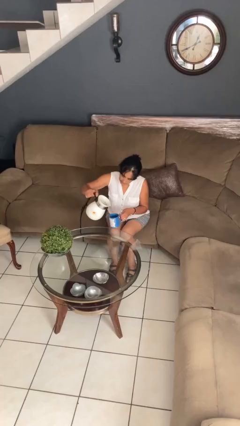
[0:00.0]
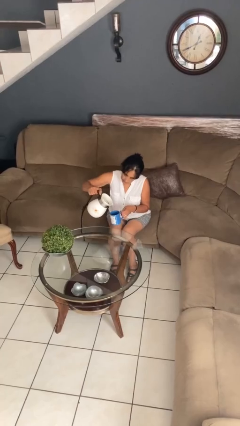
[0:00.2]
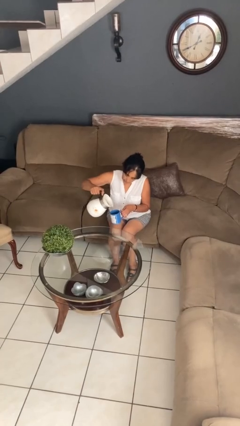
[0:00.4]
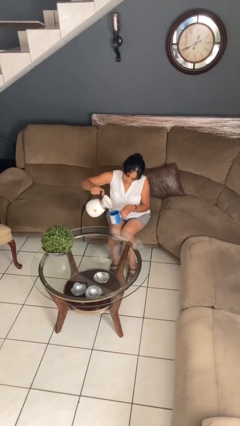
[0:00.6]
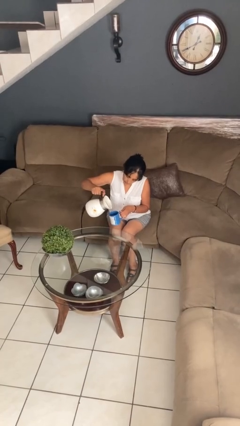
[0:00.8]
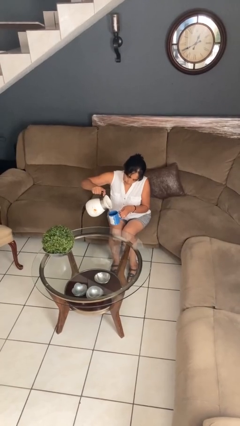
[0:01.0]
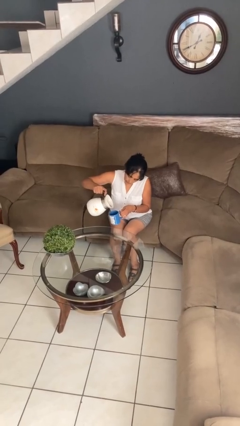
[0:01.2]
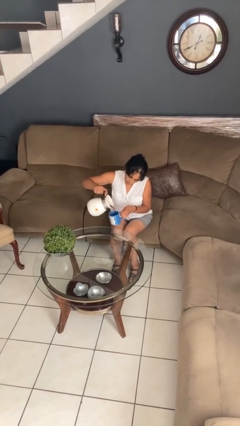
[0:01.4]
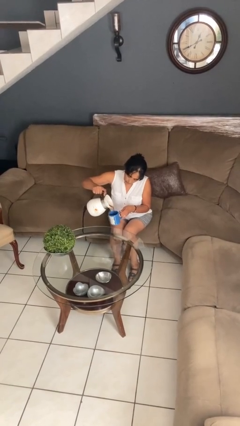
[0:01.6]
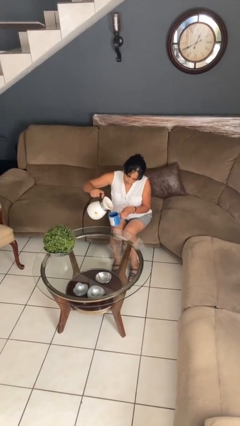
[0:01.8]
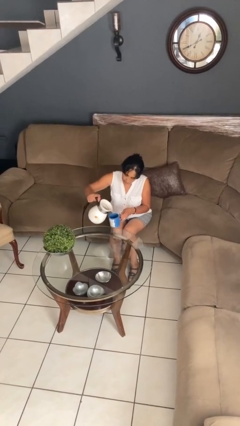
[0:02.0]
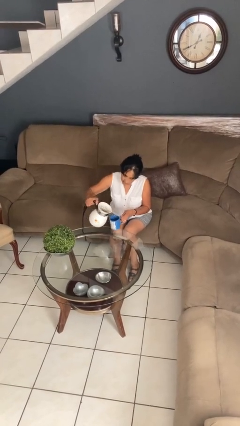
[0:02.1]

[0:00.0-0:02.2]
person pours coffee into mug

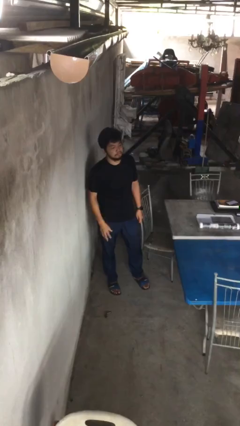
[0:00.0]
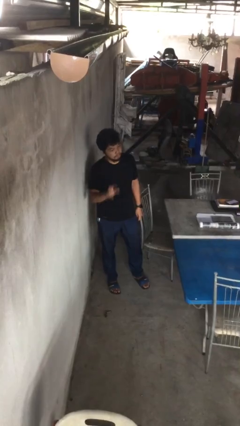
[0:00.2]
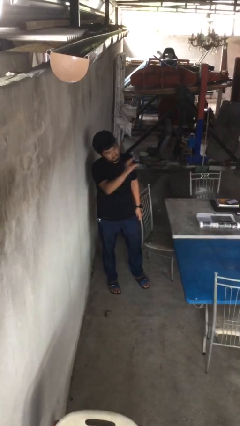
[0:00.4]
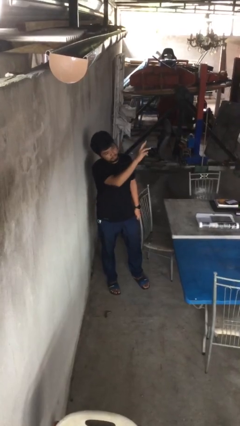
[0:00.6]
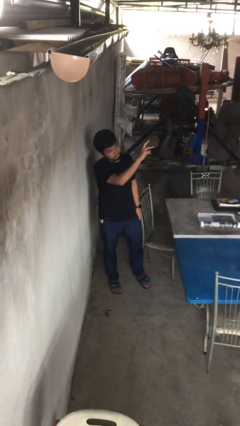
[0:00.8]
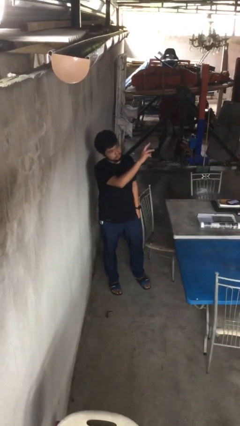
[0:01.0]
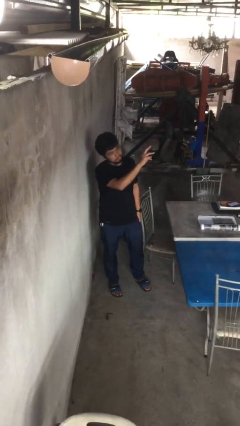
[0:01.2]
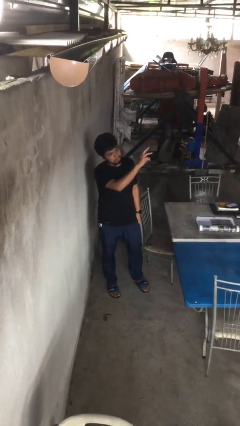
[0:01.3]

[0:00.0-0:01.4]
person gestures swipe left

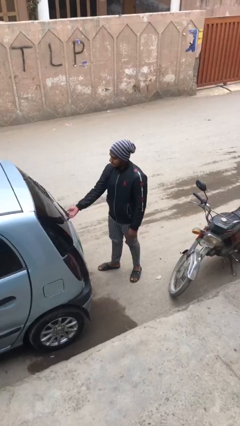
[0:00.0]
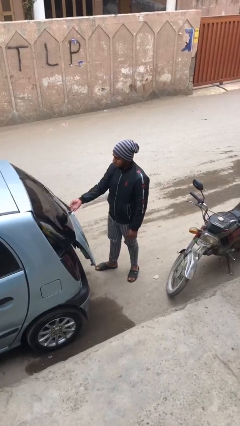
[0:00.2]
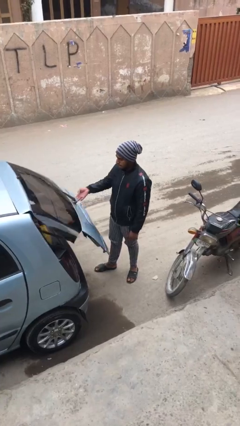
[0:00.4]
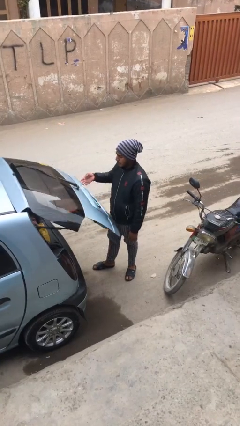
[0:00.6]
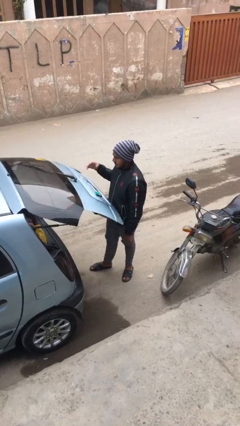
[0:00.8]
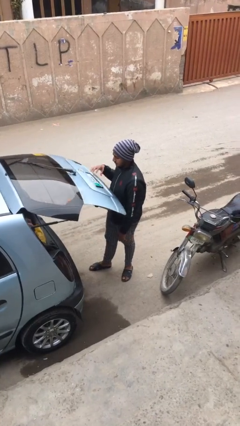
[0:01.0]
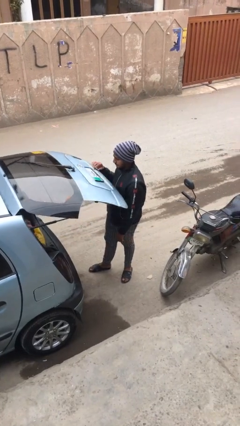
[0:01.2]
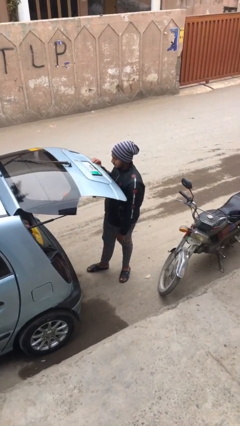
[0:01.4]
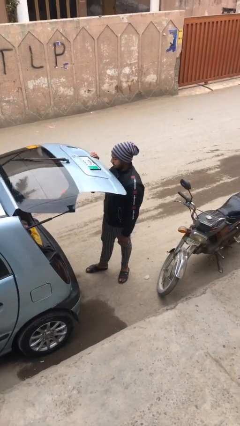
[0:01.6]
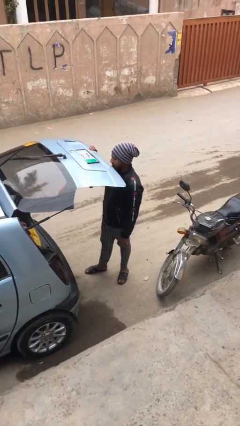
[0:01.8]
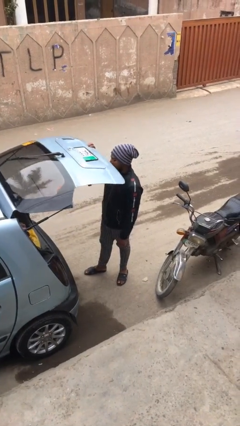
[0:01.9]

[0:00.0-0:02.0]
person opens car trunk

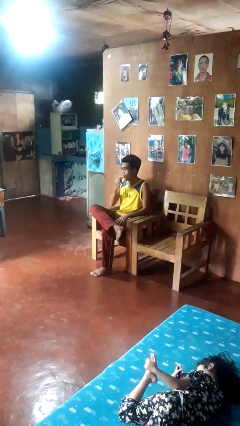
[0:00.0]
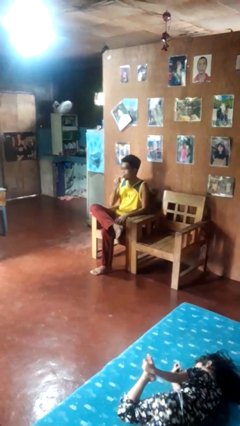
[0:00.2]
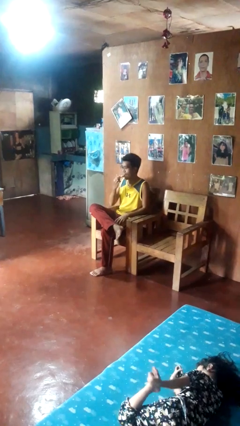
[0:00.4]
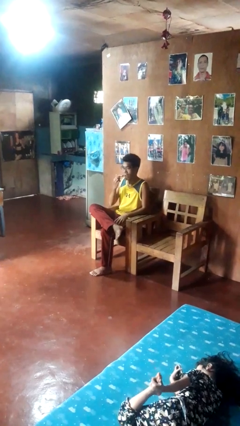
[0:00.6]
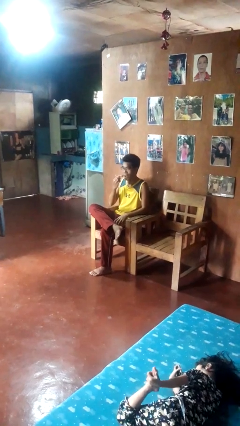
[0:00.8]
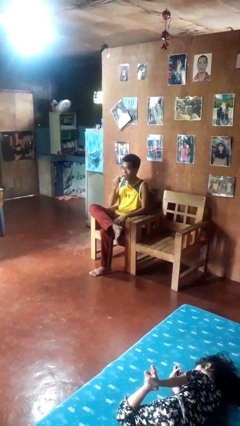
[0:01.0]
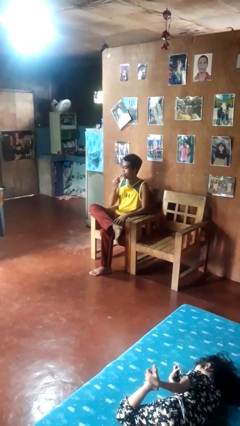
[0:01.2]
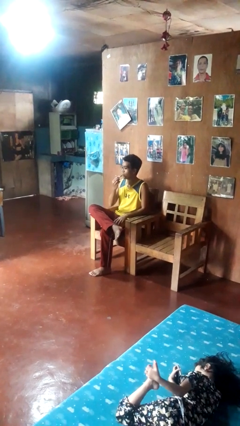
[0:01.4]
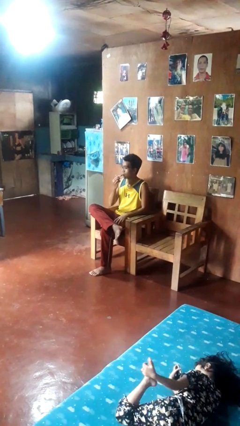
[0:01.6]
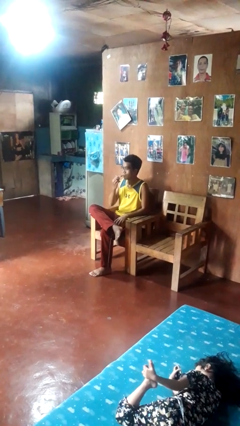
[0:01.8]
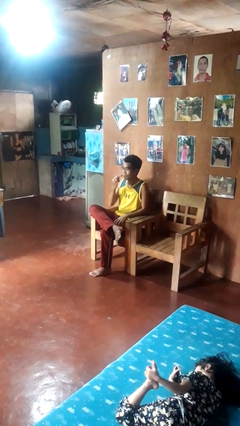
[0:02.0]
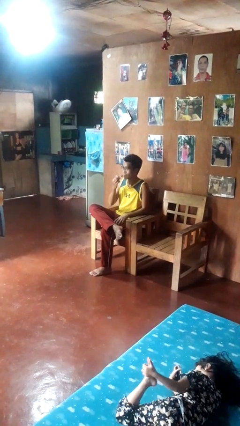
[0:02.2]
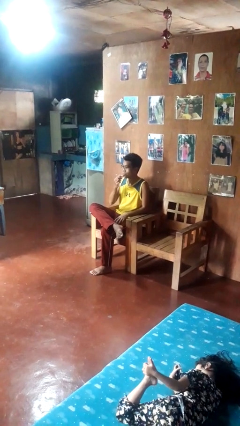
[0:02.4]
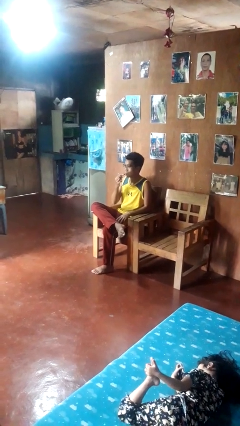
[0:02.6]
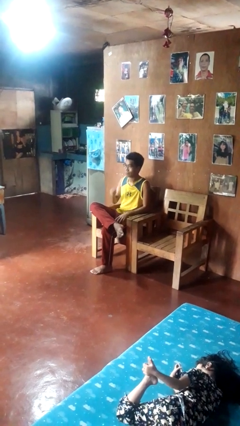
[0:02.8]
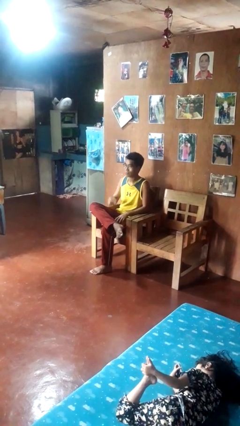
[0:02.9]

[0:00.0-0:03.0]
person applies lip makeup

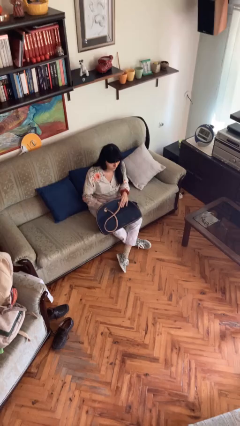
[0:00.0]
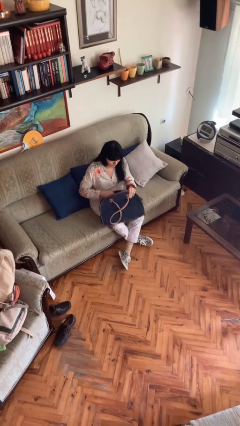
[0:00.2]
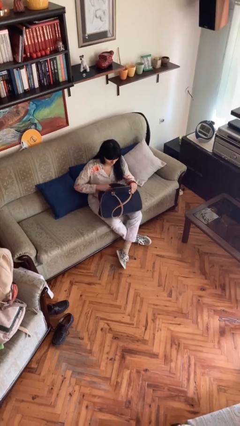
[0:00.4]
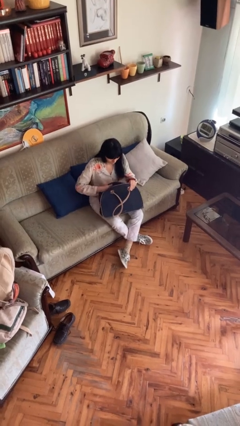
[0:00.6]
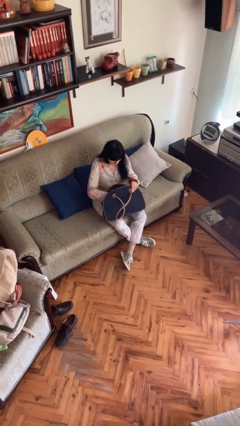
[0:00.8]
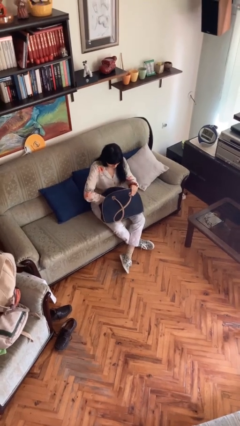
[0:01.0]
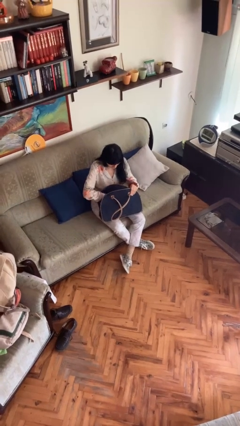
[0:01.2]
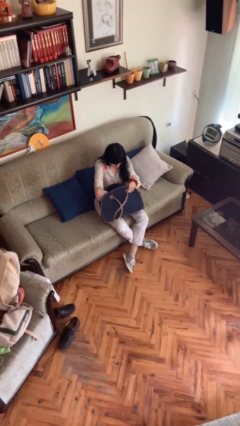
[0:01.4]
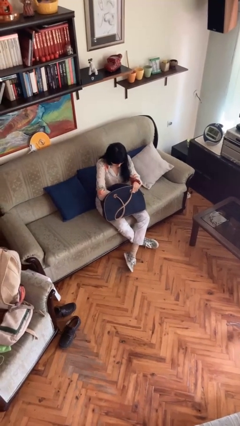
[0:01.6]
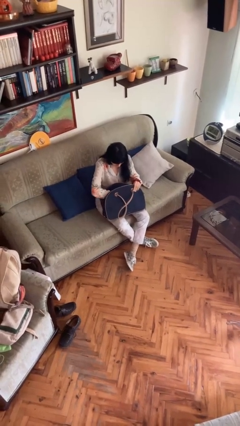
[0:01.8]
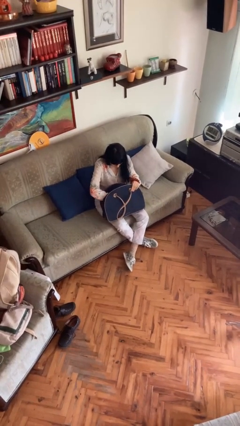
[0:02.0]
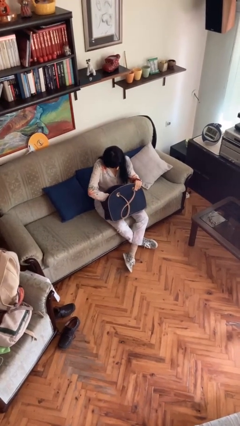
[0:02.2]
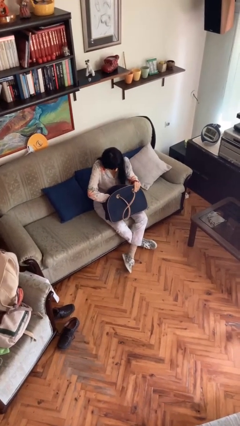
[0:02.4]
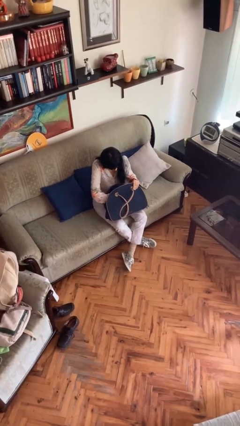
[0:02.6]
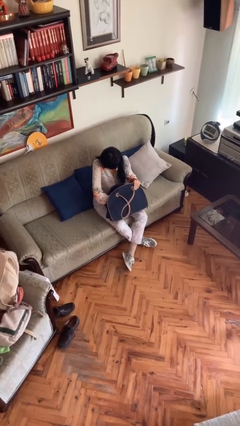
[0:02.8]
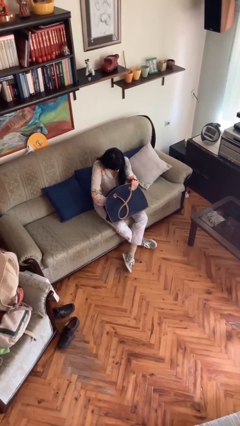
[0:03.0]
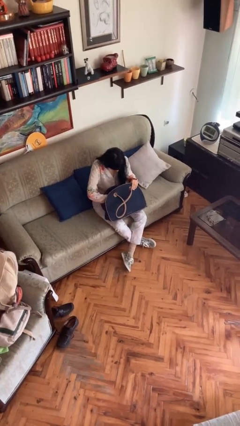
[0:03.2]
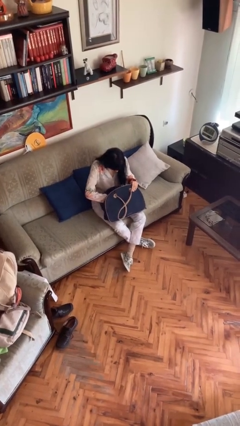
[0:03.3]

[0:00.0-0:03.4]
person searches in purse

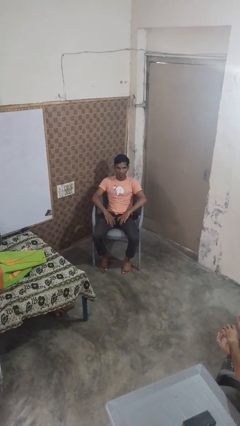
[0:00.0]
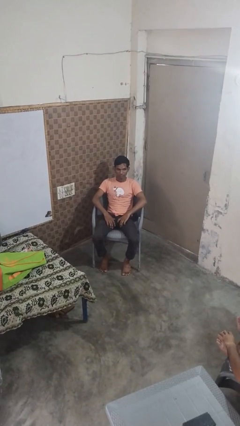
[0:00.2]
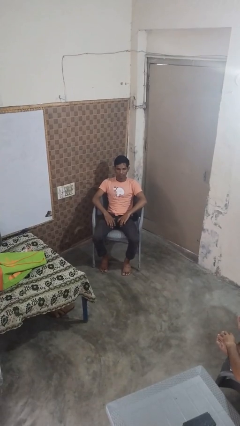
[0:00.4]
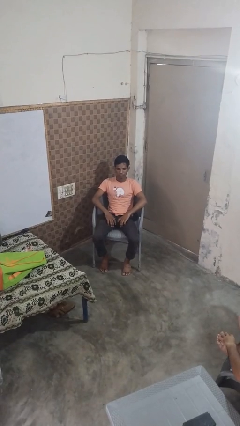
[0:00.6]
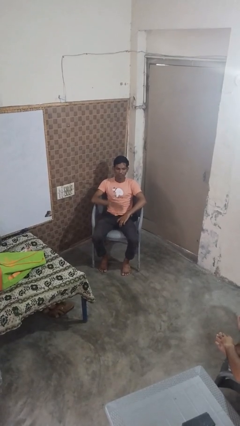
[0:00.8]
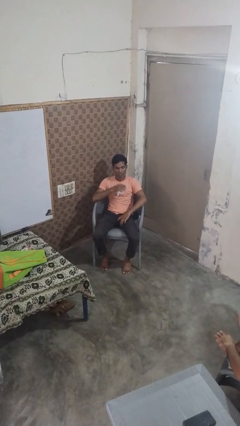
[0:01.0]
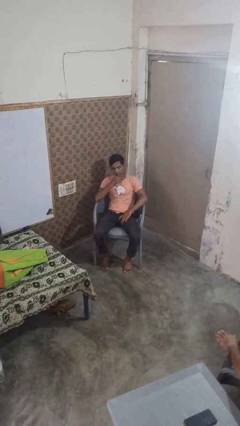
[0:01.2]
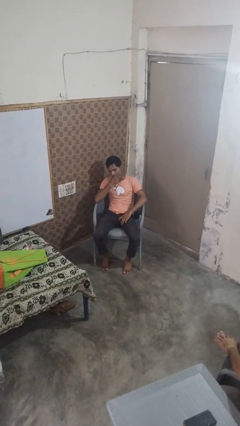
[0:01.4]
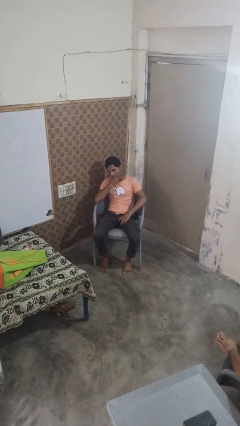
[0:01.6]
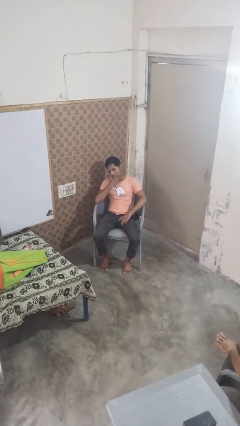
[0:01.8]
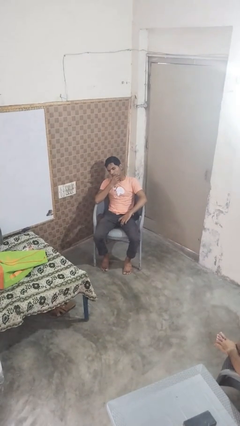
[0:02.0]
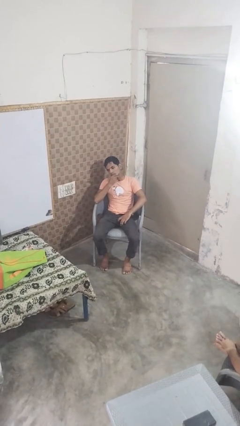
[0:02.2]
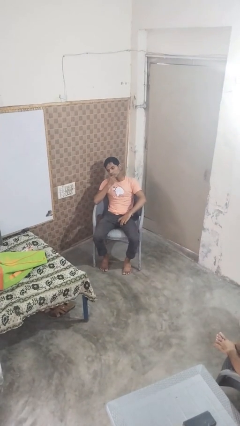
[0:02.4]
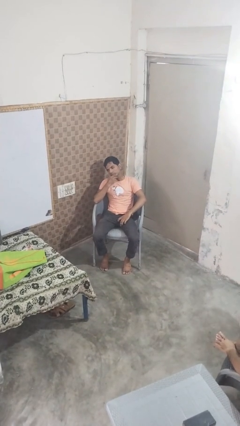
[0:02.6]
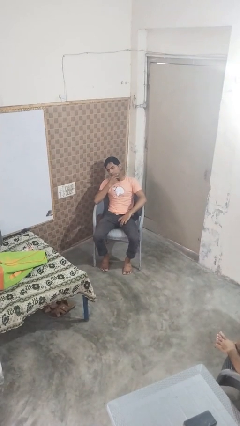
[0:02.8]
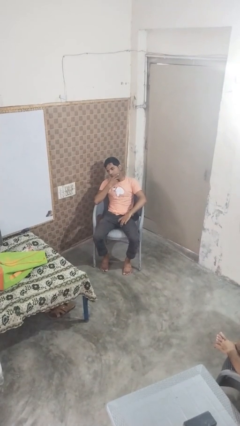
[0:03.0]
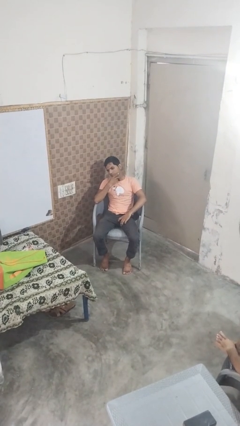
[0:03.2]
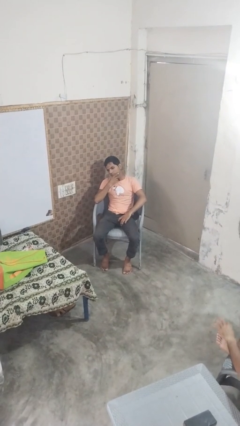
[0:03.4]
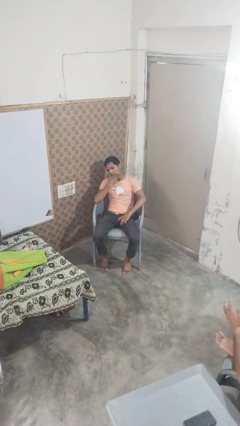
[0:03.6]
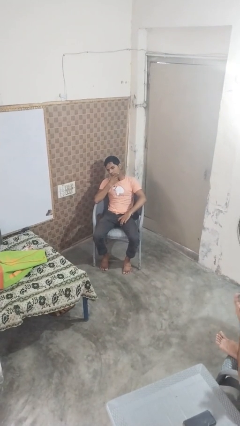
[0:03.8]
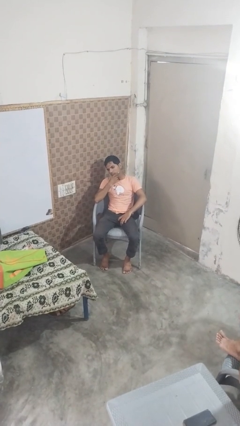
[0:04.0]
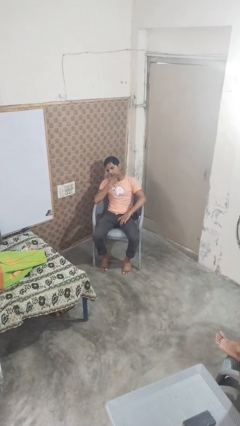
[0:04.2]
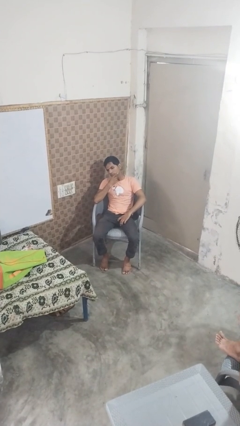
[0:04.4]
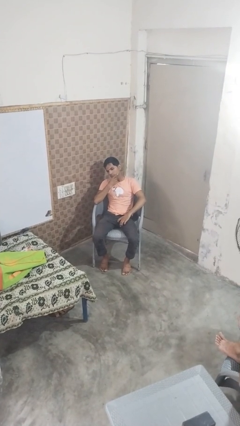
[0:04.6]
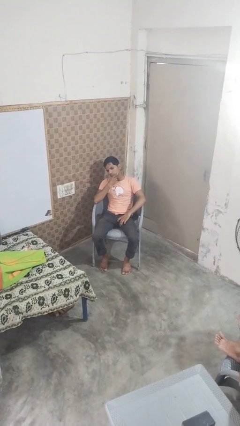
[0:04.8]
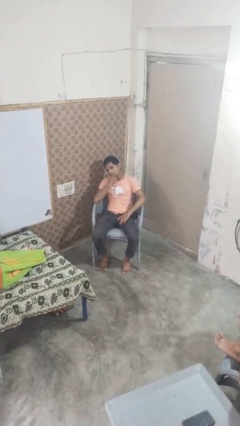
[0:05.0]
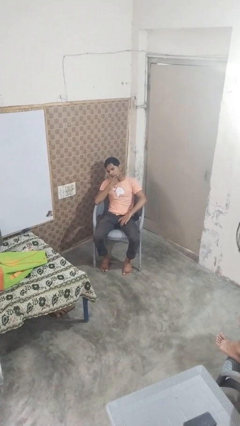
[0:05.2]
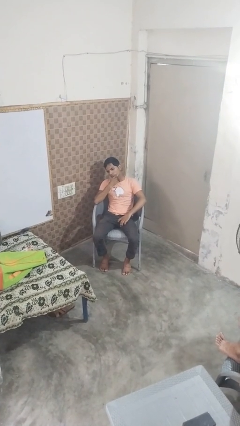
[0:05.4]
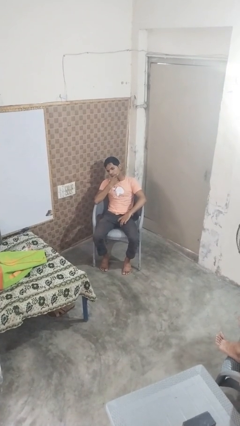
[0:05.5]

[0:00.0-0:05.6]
person strokes chin
